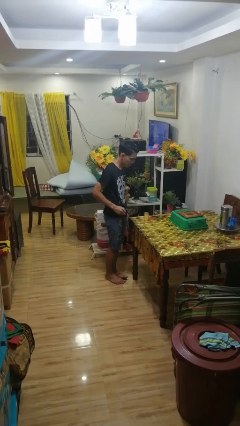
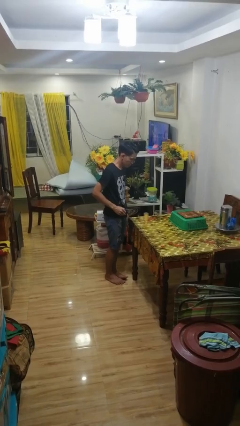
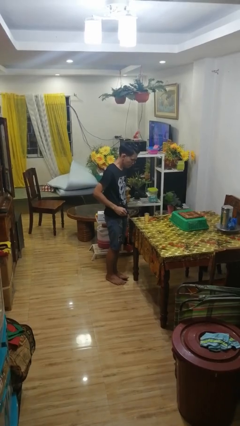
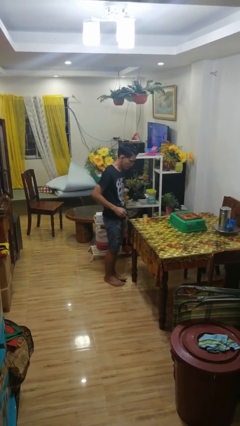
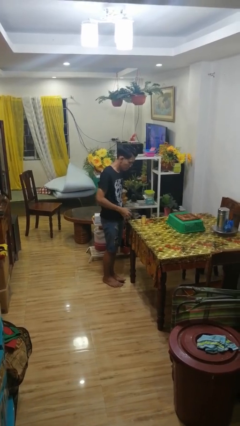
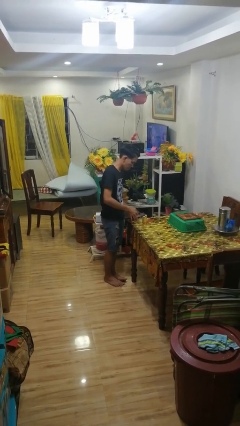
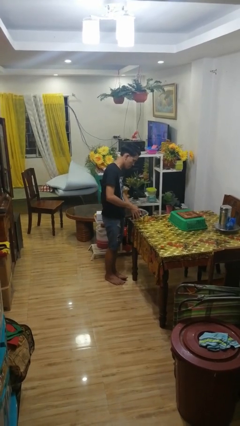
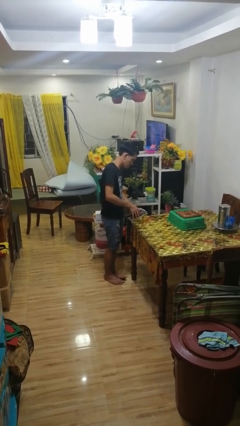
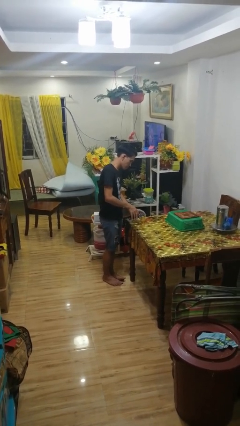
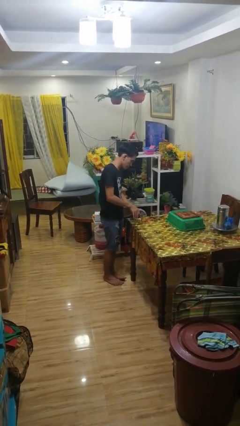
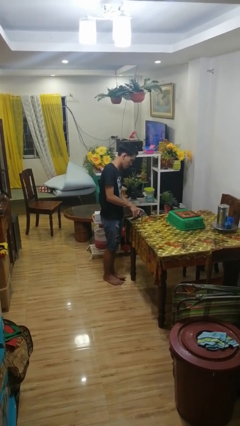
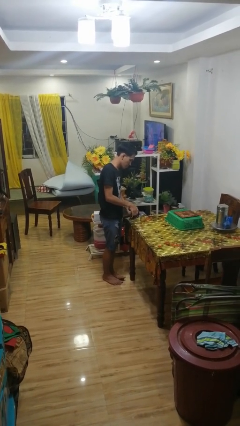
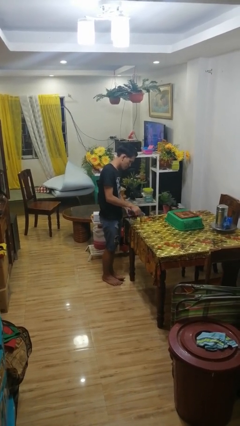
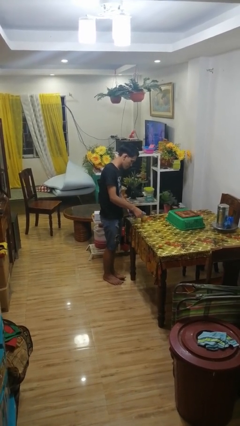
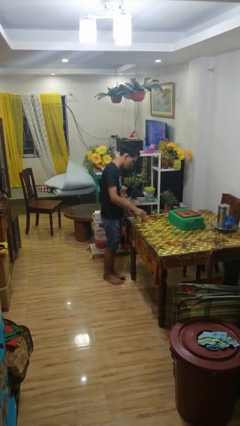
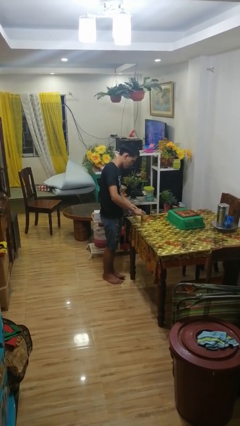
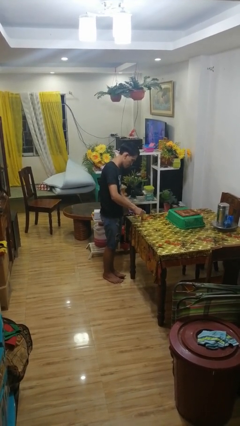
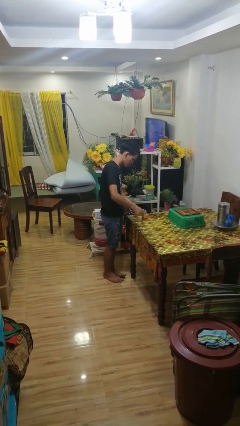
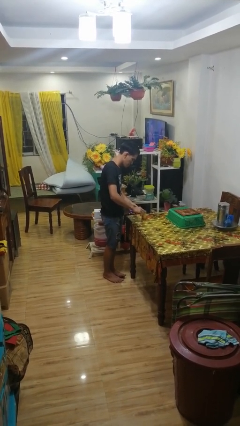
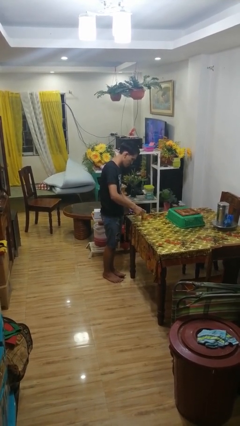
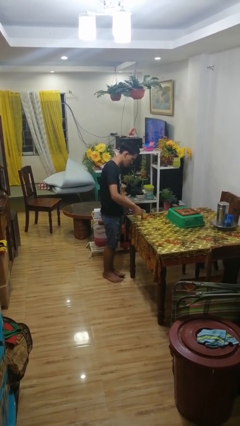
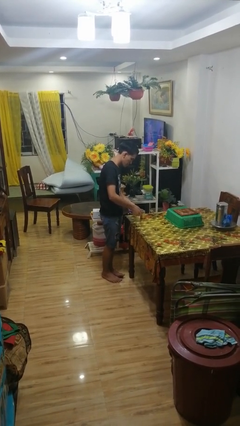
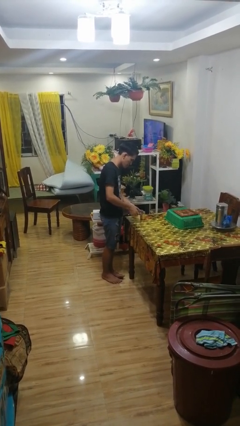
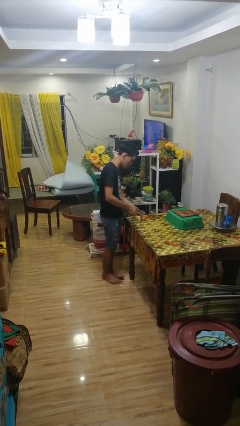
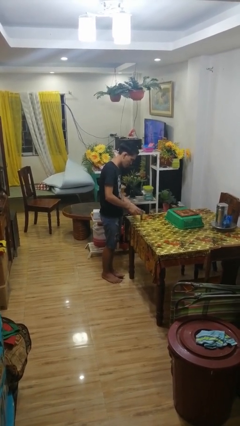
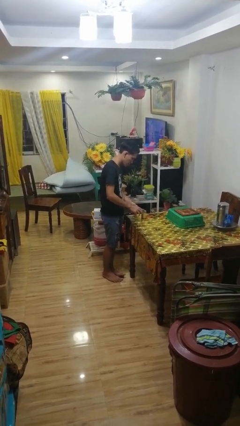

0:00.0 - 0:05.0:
person opens can with can opener

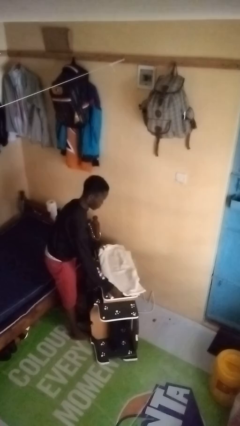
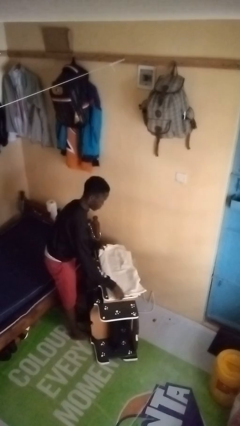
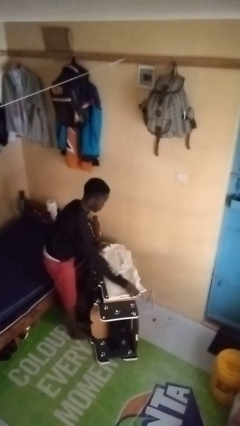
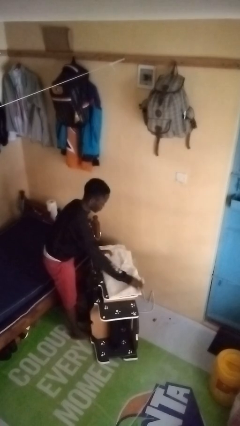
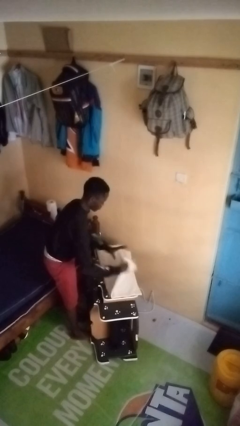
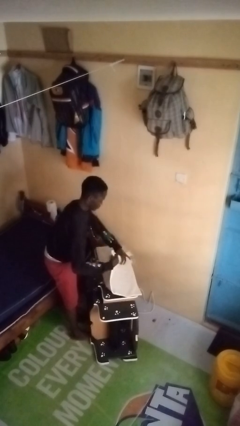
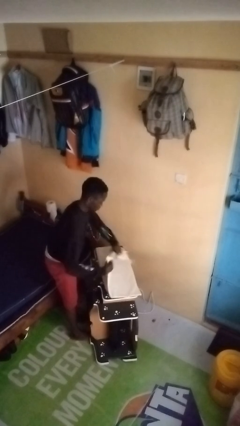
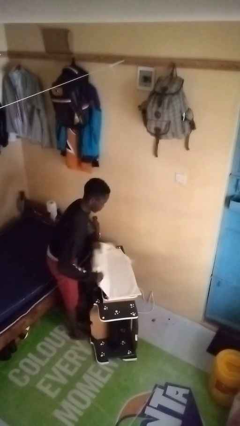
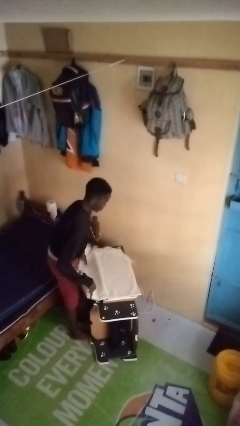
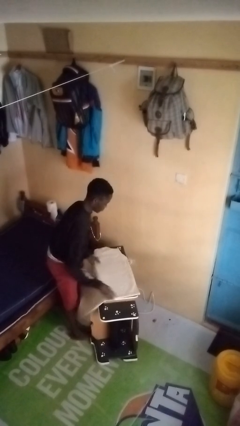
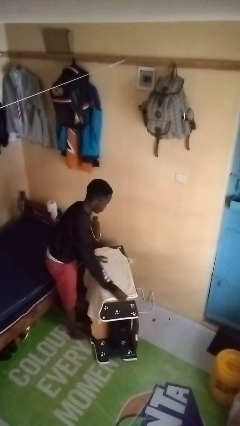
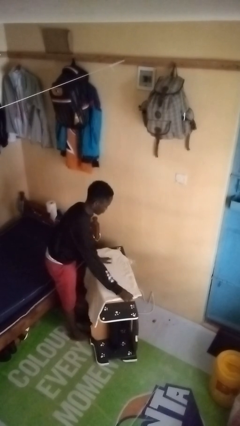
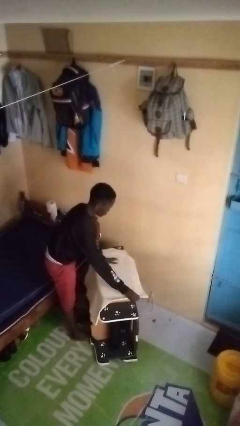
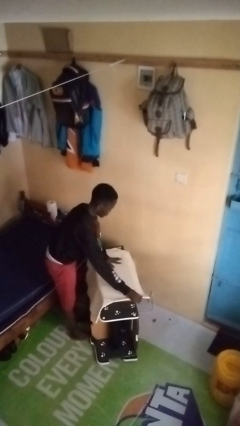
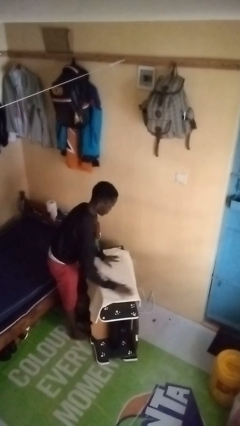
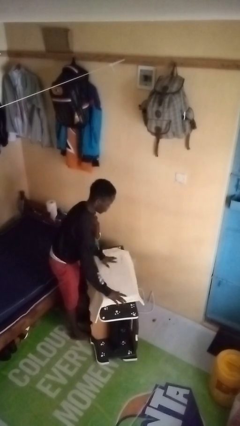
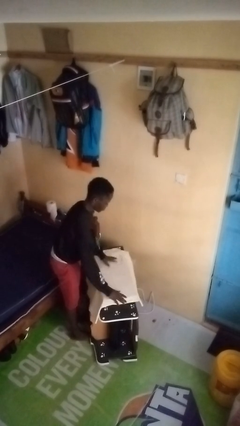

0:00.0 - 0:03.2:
person spreads tablecloth

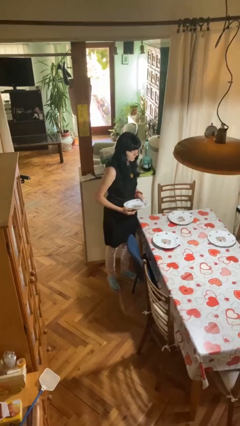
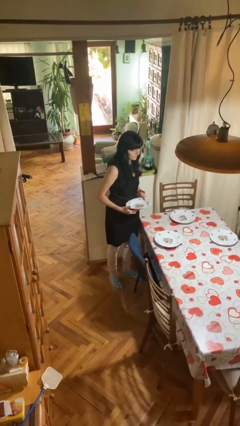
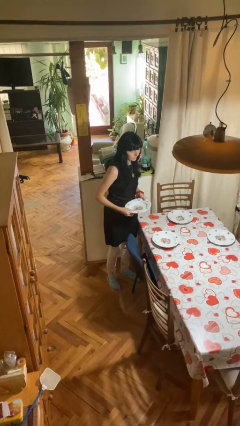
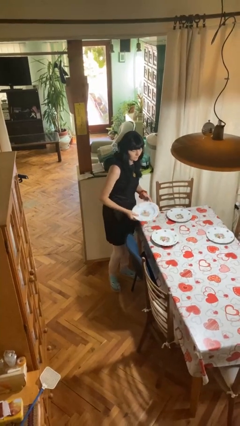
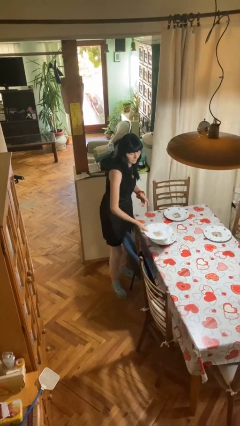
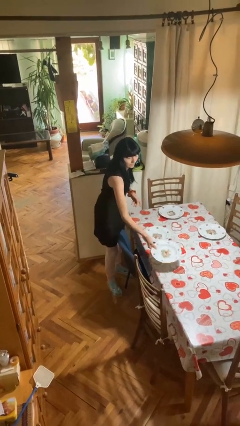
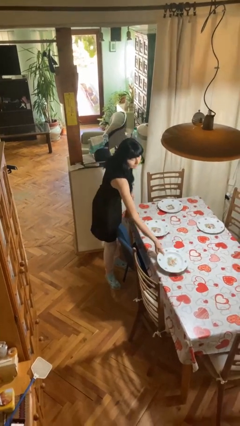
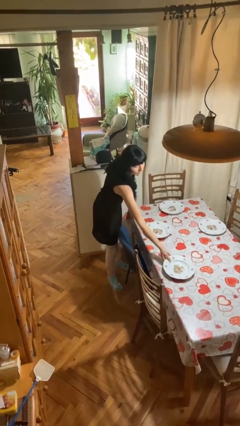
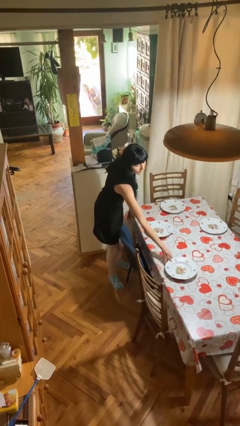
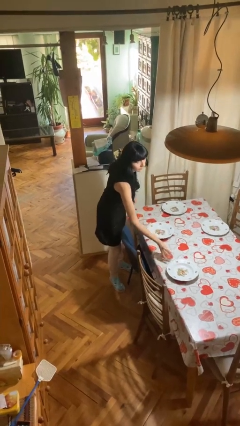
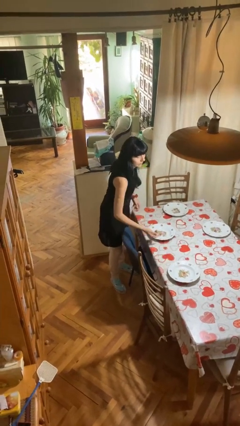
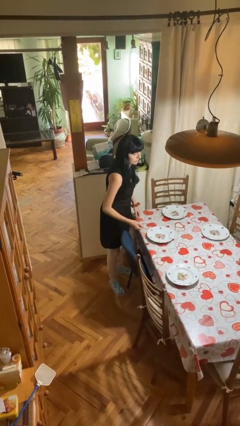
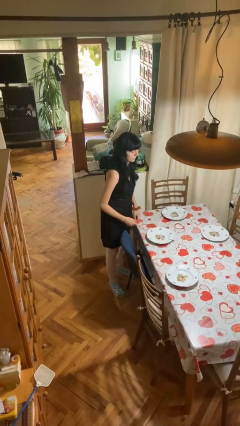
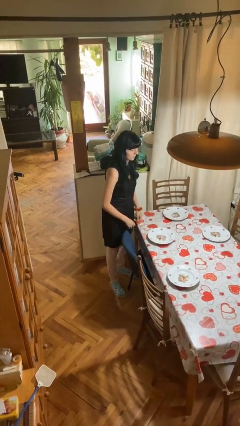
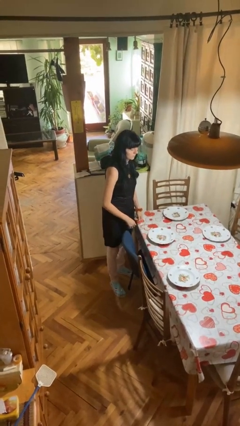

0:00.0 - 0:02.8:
person sets table

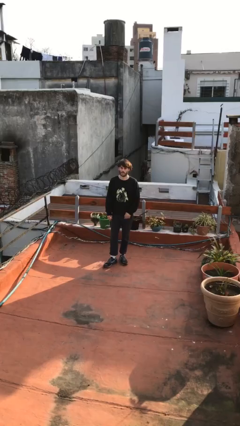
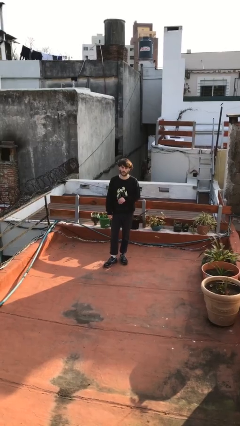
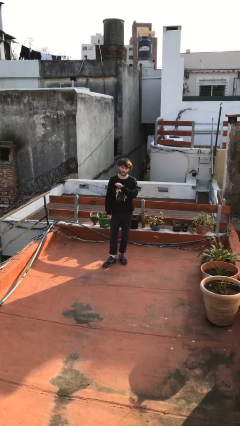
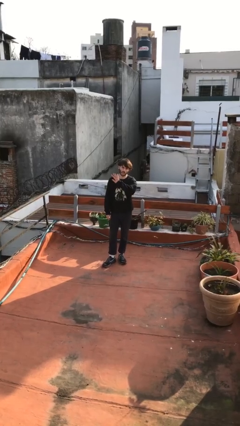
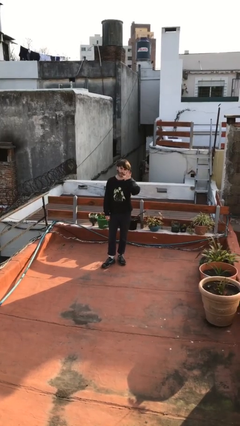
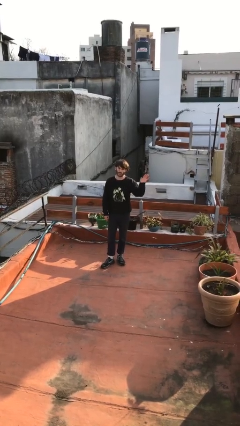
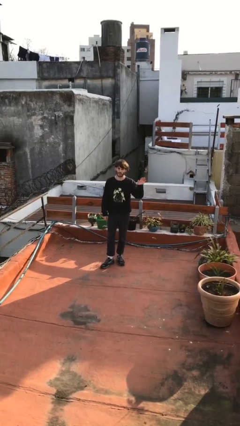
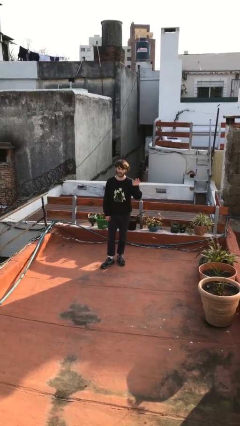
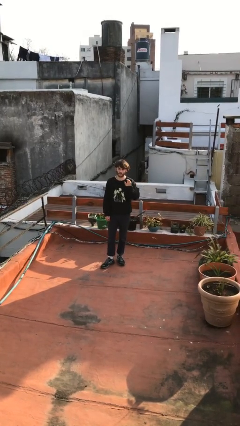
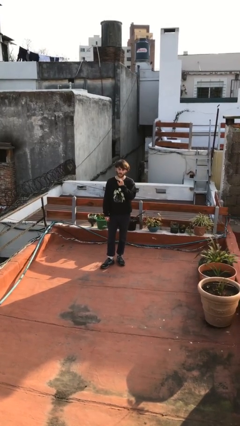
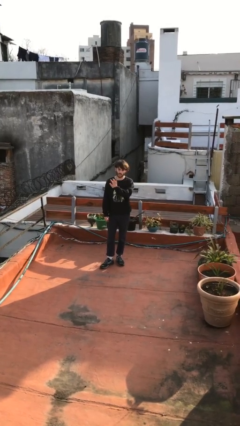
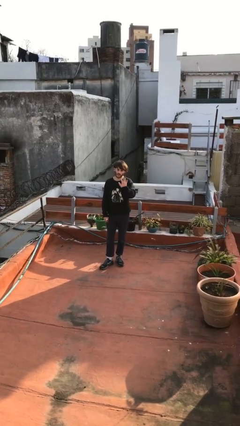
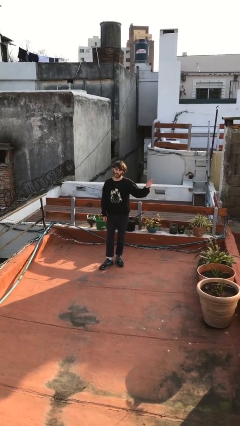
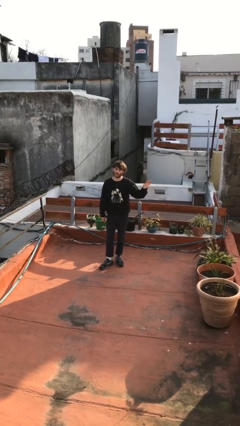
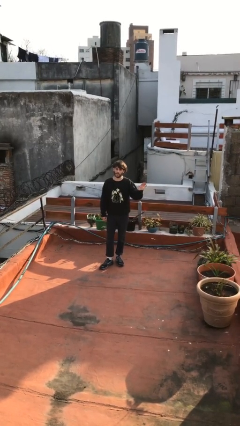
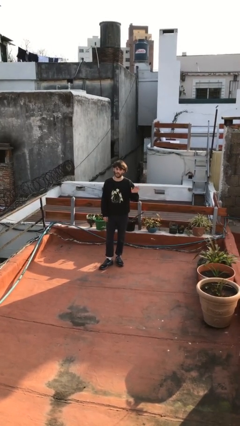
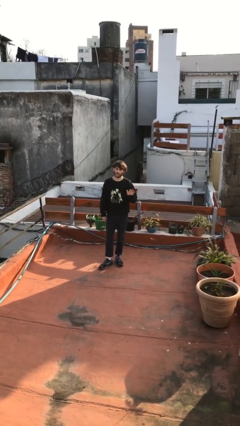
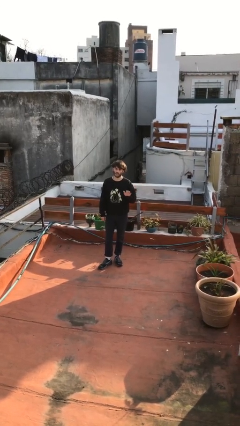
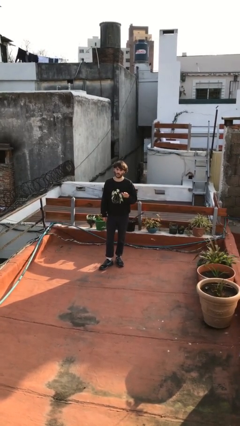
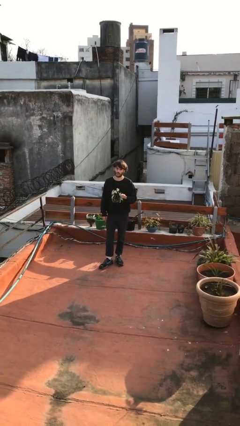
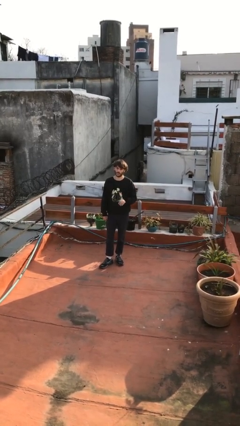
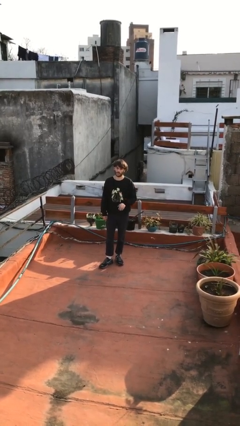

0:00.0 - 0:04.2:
person gestures swipe left

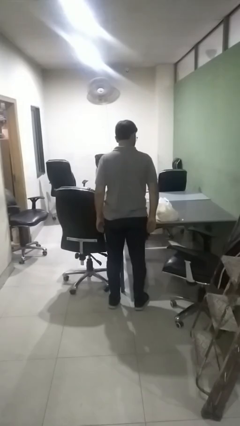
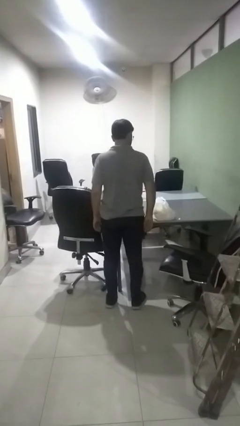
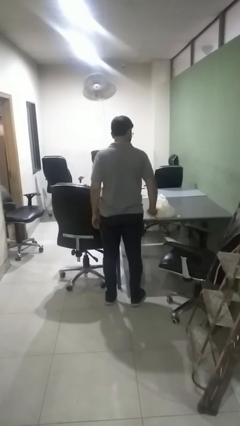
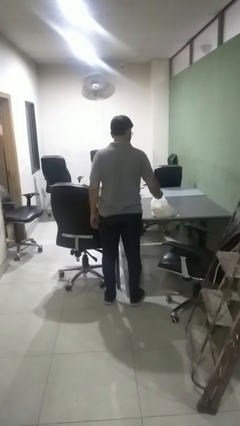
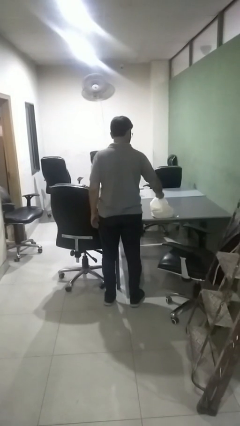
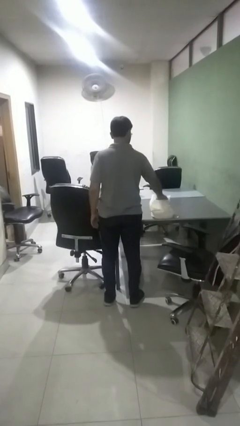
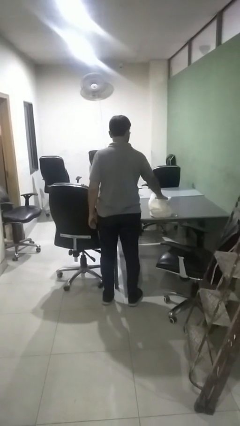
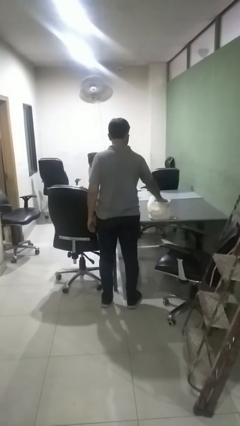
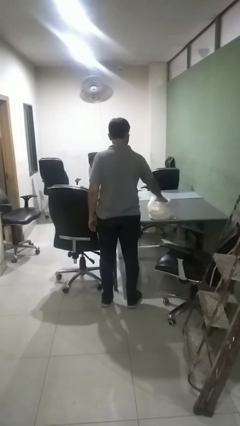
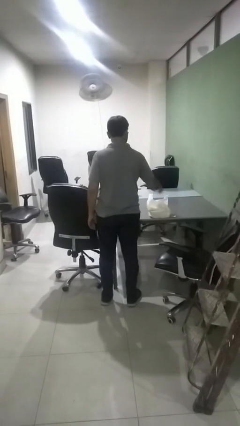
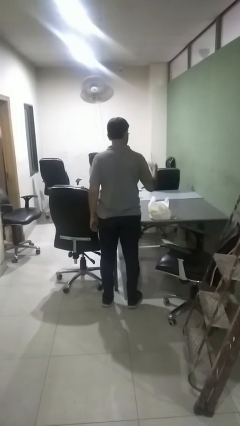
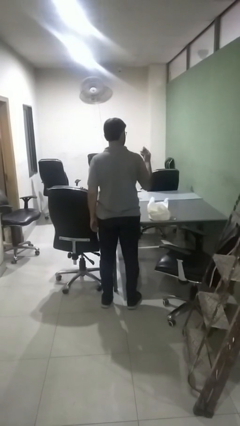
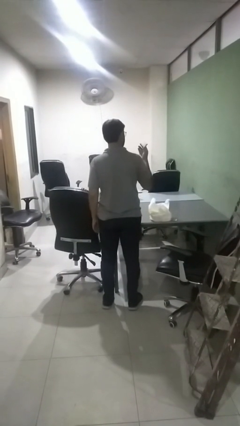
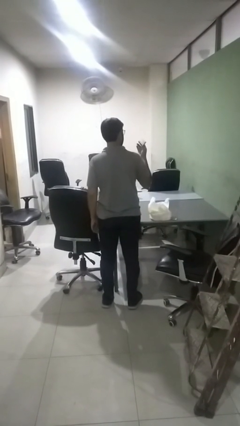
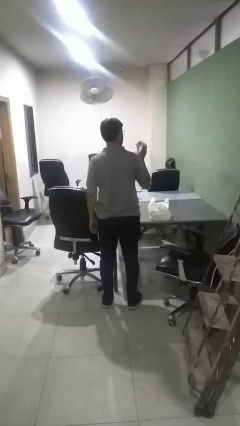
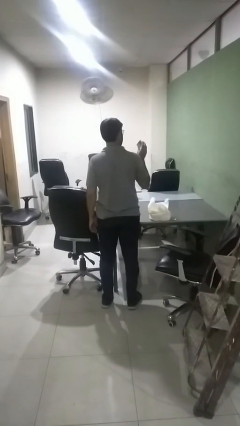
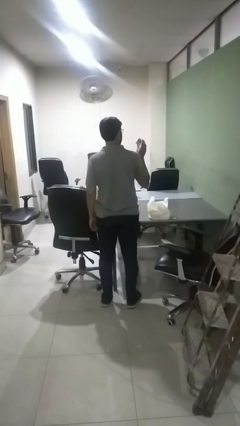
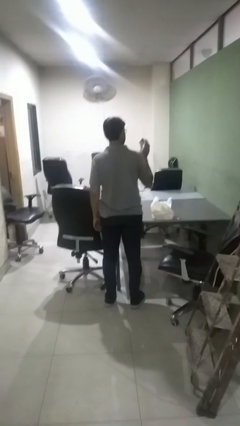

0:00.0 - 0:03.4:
person takes object from bag
